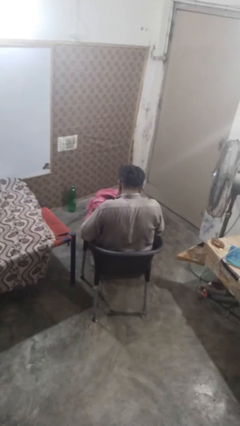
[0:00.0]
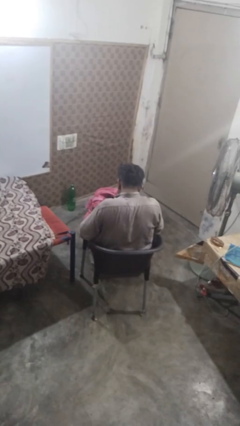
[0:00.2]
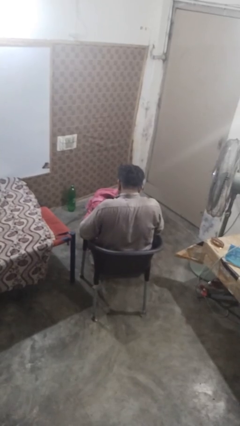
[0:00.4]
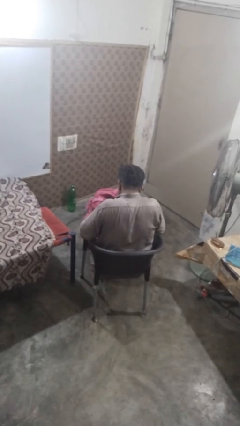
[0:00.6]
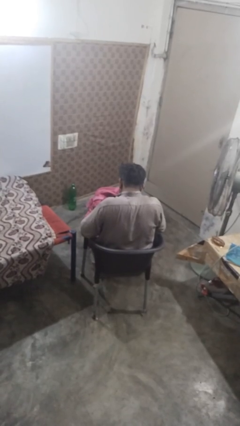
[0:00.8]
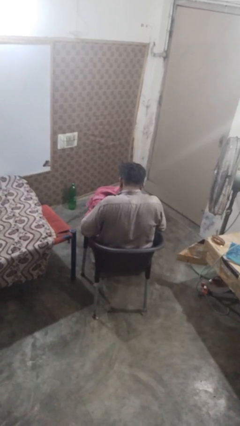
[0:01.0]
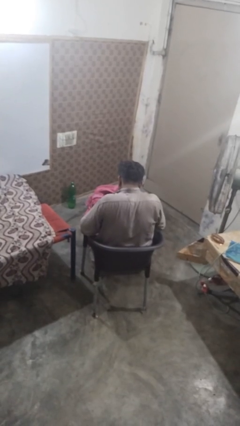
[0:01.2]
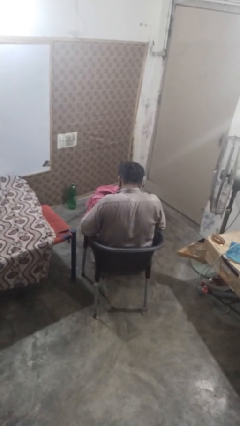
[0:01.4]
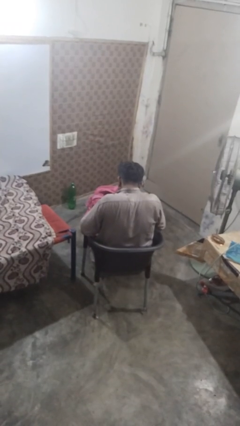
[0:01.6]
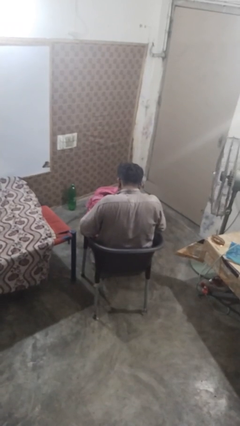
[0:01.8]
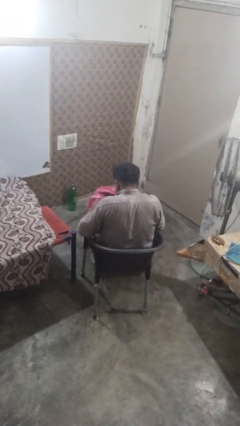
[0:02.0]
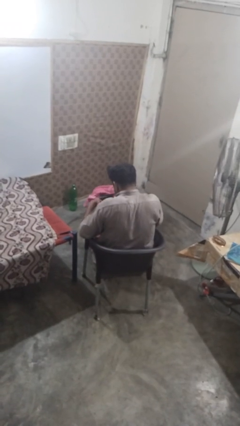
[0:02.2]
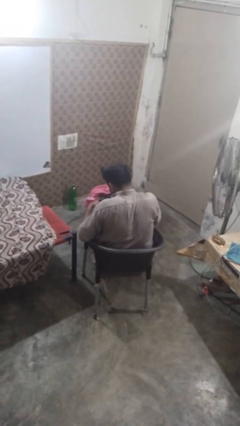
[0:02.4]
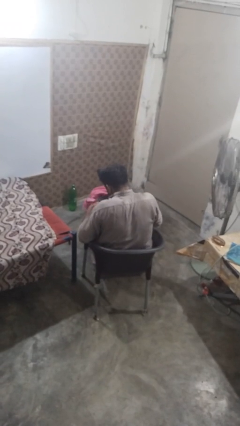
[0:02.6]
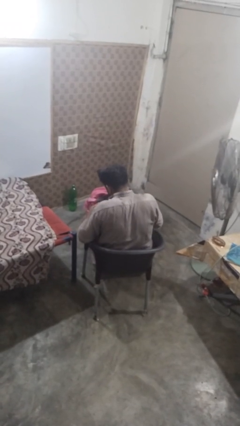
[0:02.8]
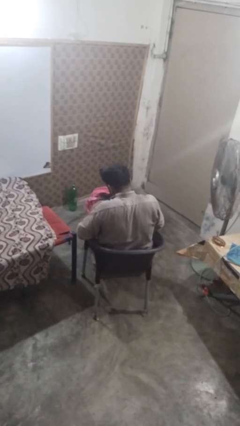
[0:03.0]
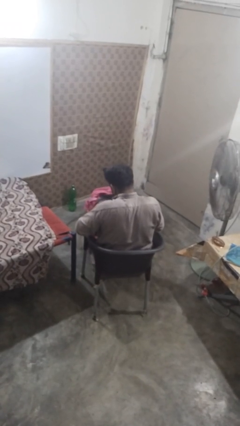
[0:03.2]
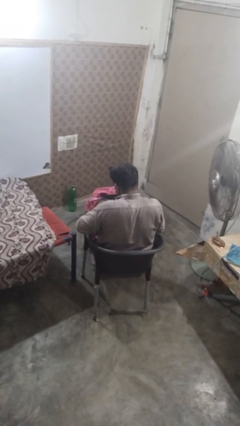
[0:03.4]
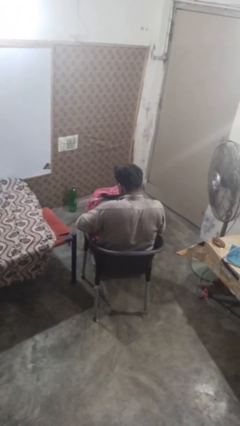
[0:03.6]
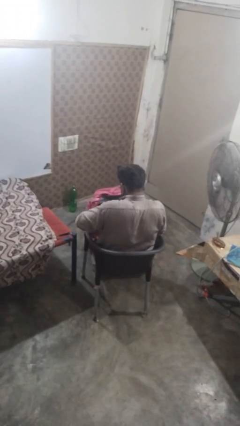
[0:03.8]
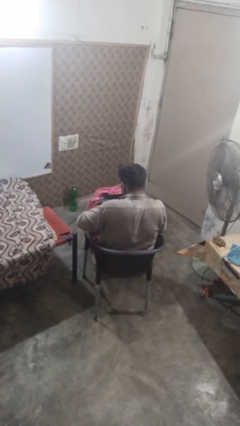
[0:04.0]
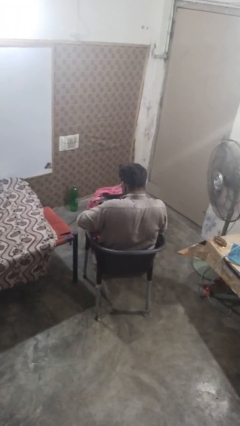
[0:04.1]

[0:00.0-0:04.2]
person searches in backpack

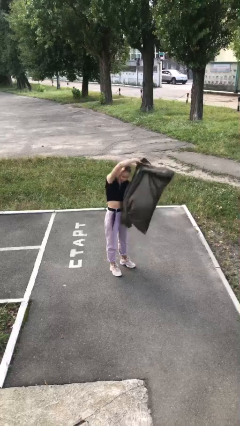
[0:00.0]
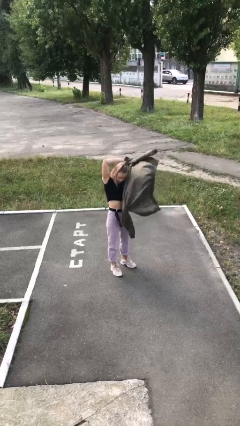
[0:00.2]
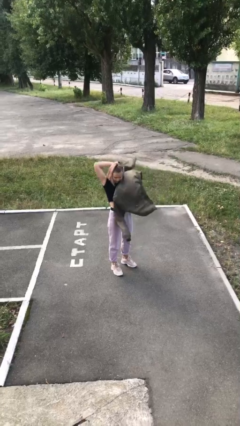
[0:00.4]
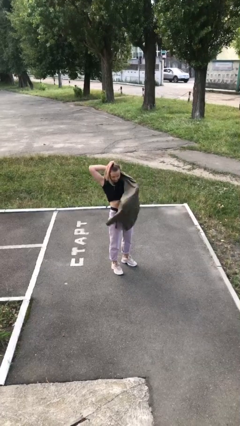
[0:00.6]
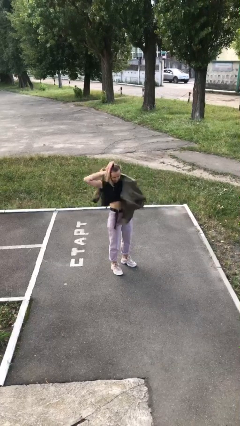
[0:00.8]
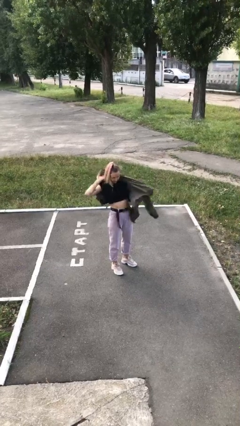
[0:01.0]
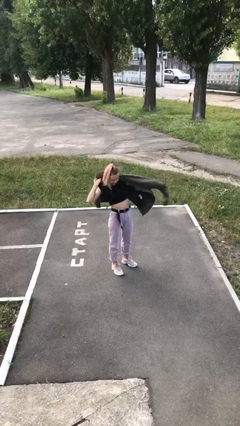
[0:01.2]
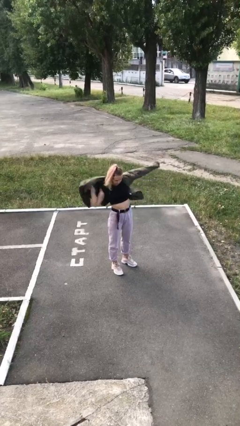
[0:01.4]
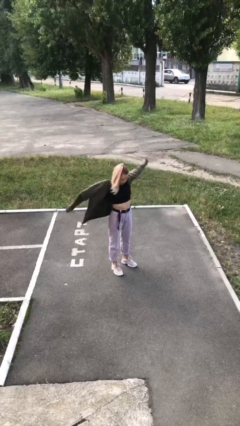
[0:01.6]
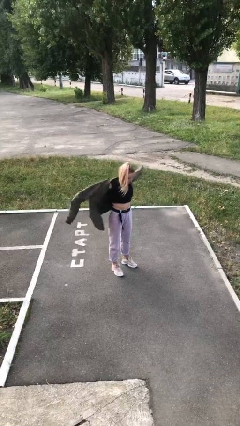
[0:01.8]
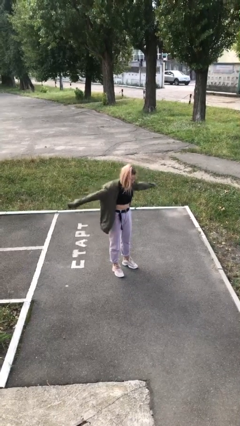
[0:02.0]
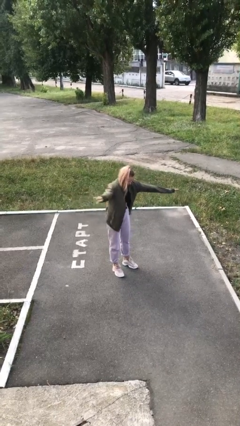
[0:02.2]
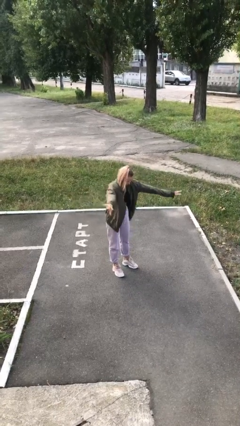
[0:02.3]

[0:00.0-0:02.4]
person puts on jacket

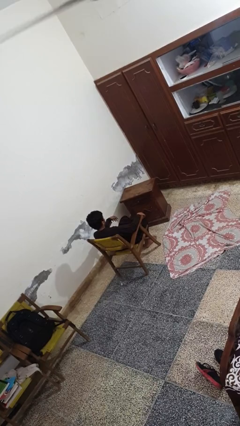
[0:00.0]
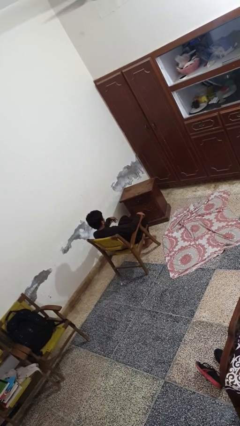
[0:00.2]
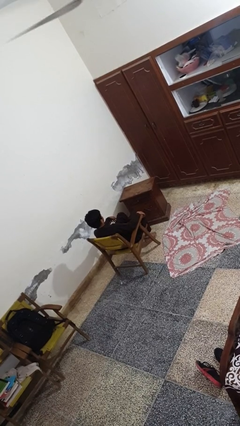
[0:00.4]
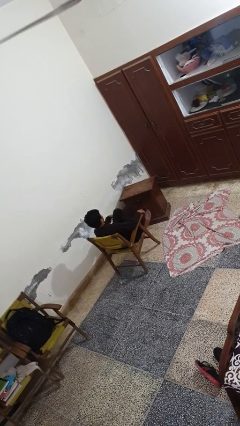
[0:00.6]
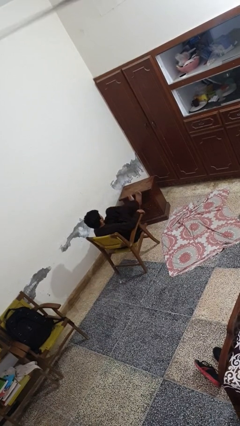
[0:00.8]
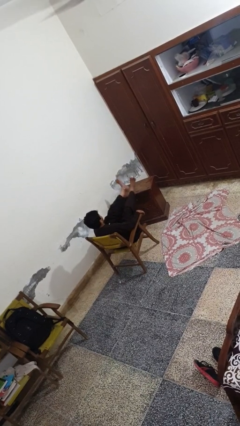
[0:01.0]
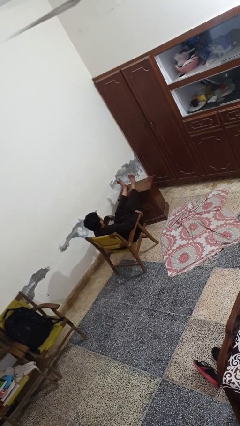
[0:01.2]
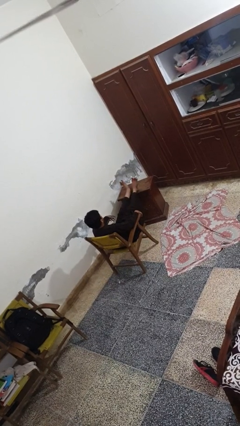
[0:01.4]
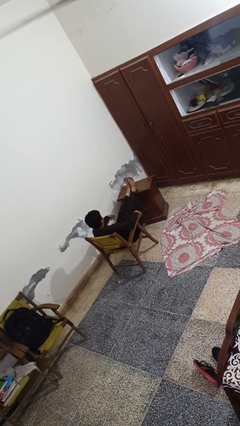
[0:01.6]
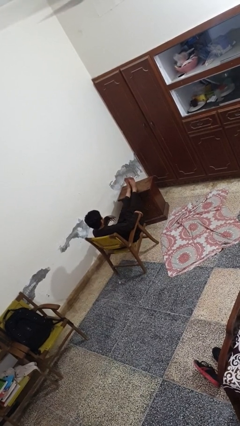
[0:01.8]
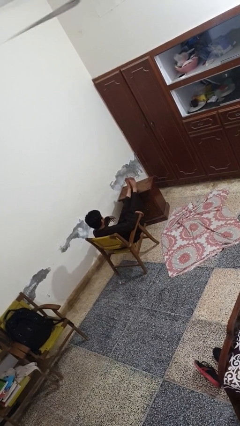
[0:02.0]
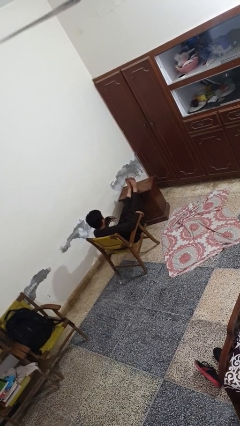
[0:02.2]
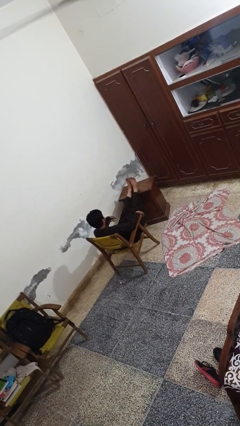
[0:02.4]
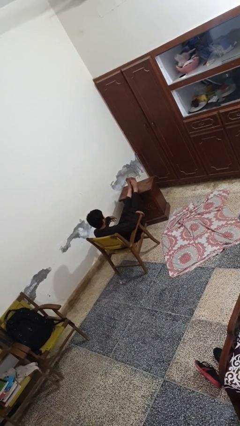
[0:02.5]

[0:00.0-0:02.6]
person puts feet up

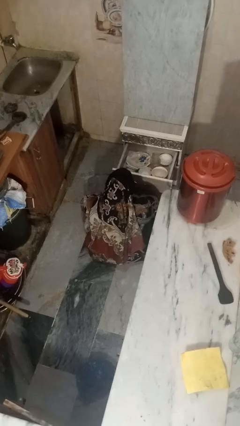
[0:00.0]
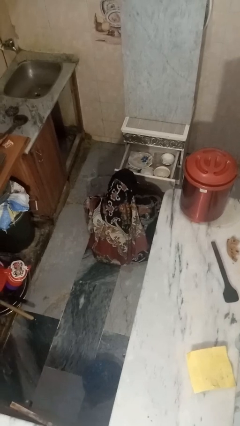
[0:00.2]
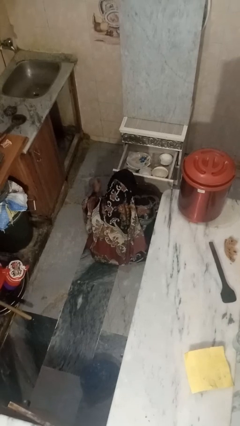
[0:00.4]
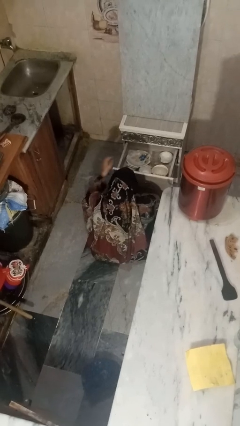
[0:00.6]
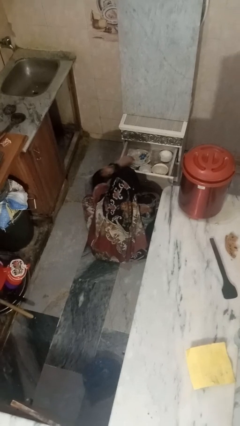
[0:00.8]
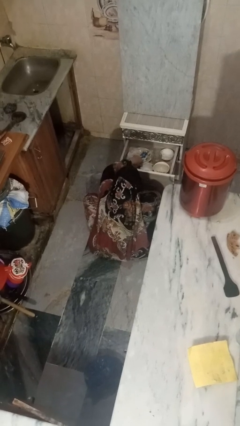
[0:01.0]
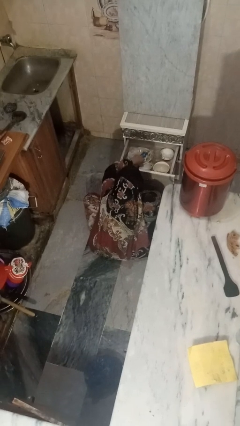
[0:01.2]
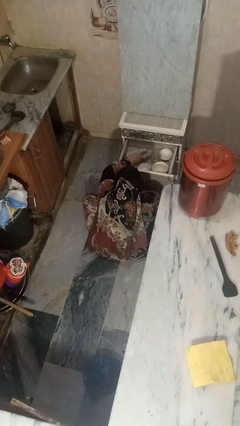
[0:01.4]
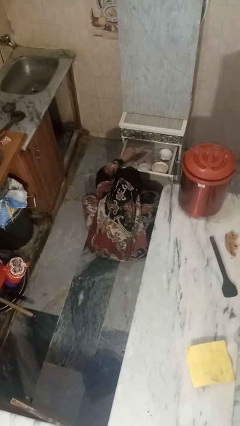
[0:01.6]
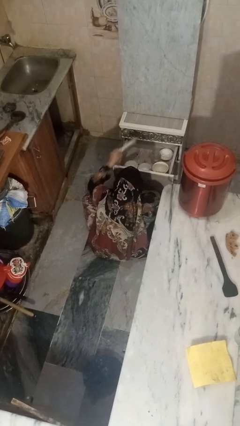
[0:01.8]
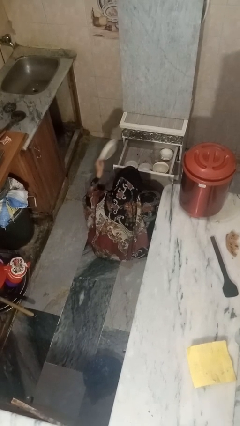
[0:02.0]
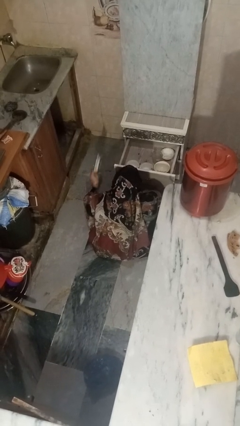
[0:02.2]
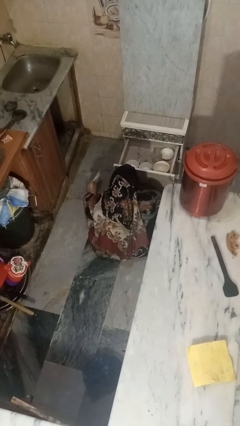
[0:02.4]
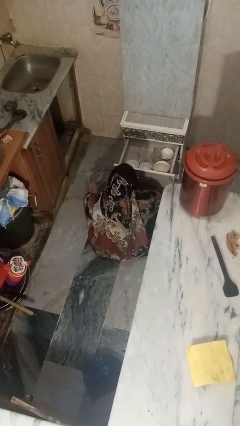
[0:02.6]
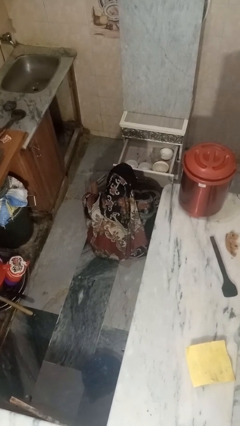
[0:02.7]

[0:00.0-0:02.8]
person takes object from kitchen drawer

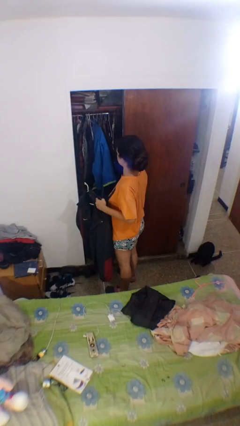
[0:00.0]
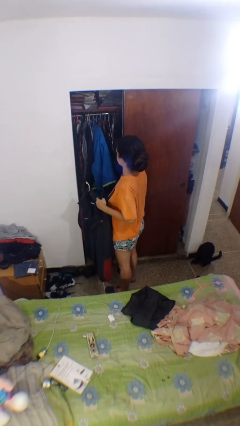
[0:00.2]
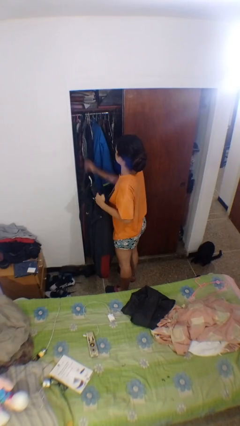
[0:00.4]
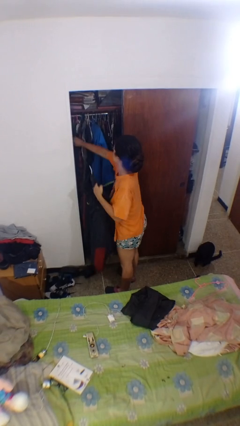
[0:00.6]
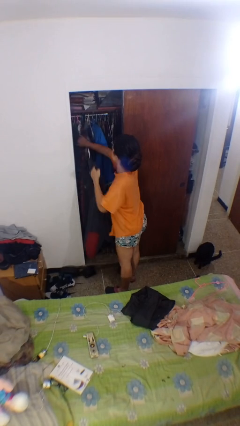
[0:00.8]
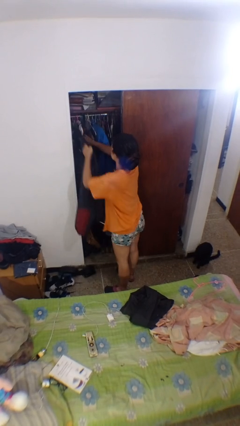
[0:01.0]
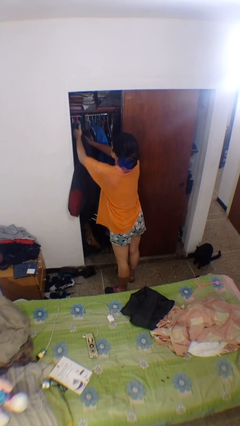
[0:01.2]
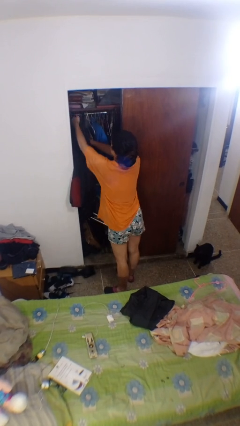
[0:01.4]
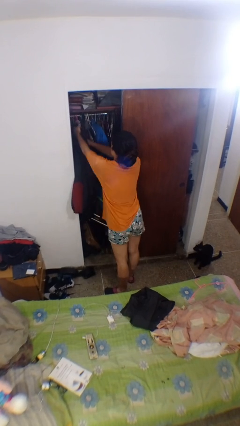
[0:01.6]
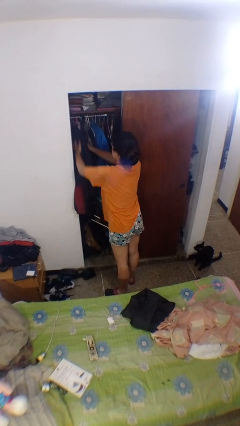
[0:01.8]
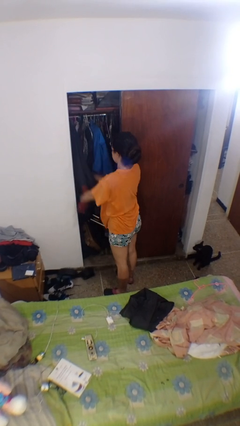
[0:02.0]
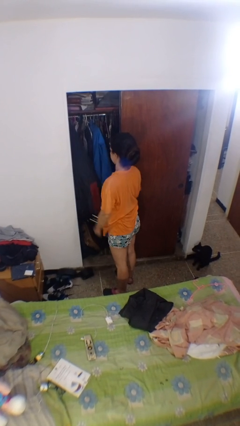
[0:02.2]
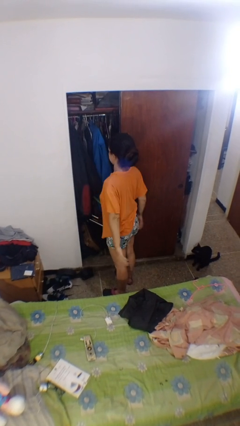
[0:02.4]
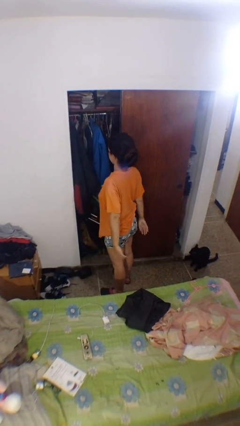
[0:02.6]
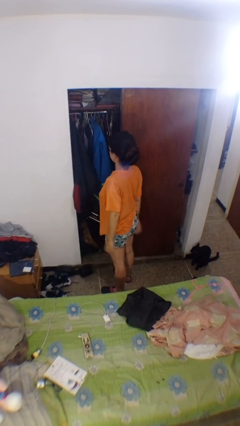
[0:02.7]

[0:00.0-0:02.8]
person puts clothes into closet

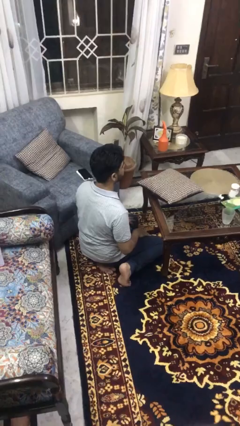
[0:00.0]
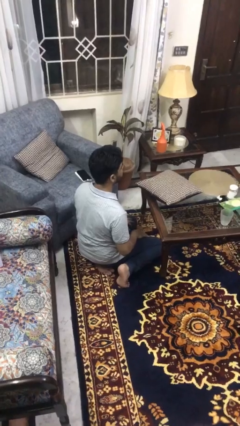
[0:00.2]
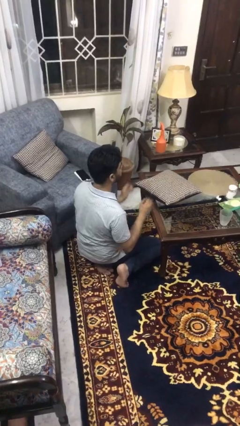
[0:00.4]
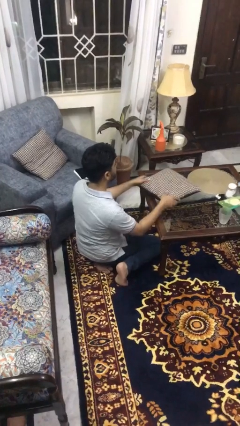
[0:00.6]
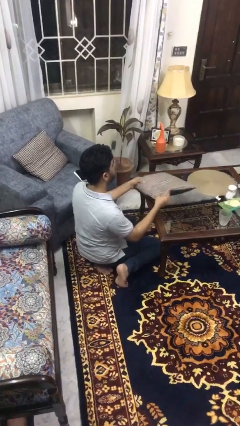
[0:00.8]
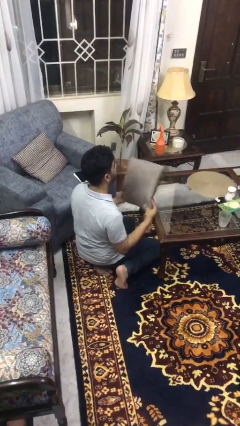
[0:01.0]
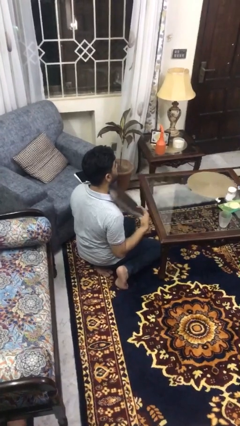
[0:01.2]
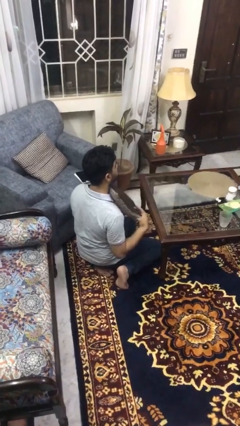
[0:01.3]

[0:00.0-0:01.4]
person picks up object from table

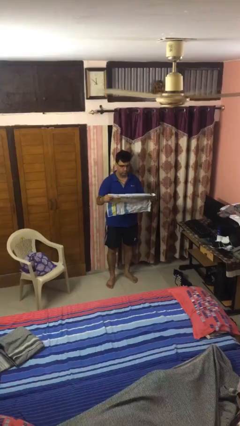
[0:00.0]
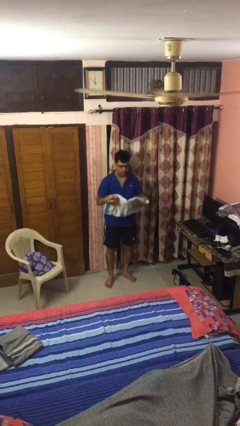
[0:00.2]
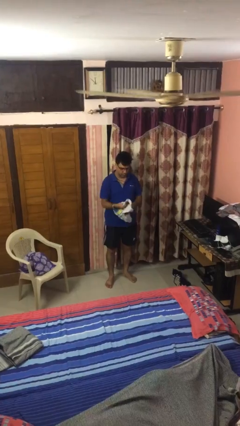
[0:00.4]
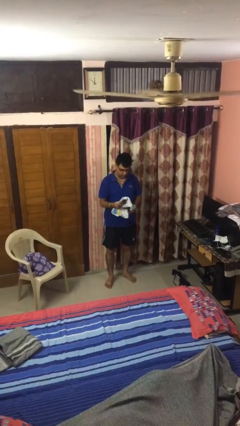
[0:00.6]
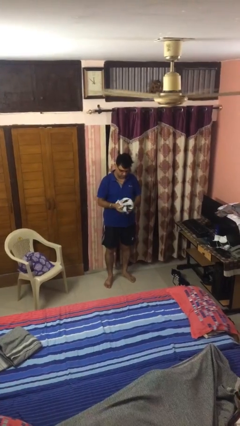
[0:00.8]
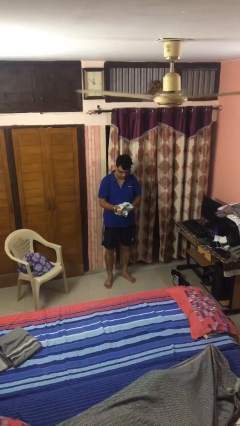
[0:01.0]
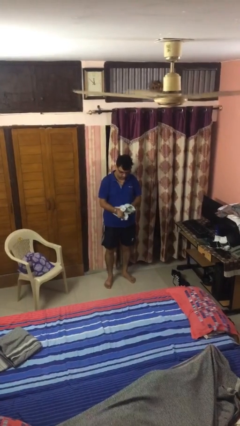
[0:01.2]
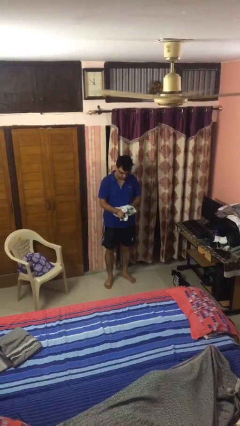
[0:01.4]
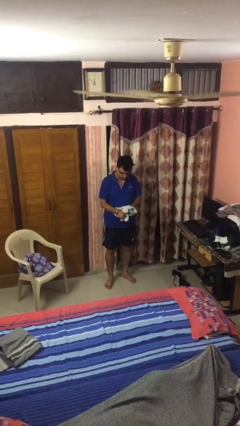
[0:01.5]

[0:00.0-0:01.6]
person crumples paper
